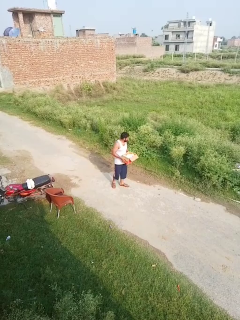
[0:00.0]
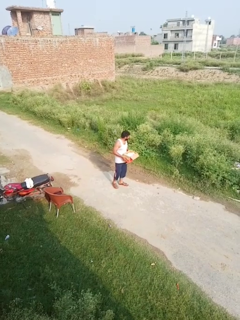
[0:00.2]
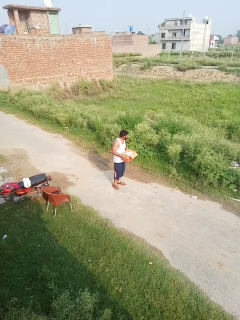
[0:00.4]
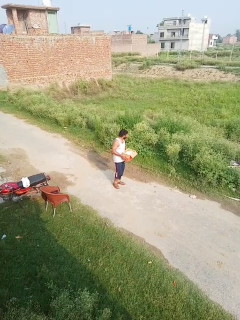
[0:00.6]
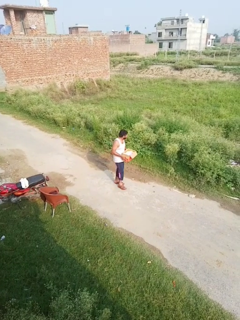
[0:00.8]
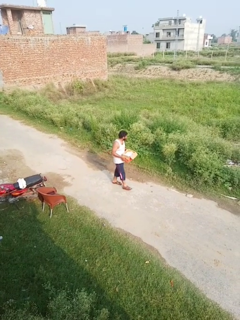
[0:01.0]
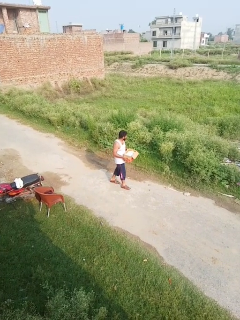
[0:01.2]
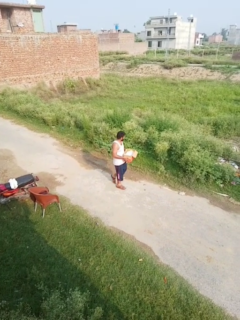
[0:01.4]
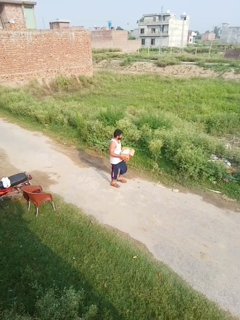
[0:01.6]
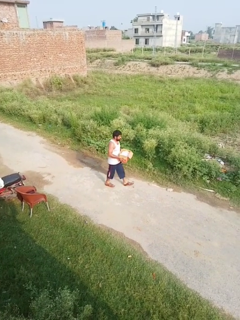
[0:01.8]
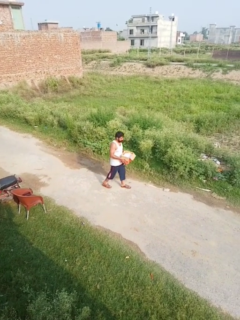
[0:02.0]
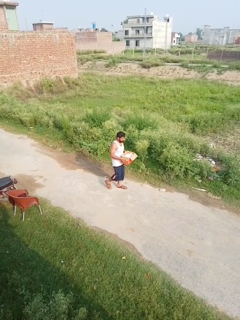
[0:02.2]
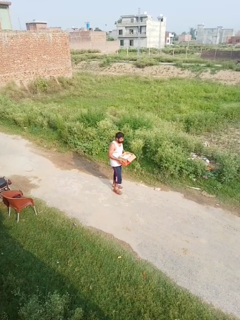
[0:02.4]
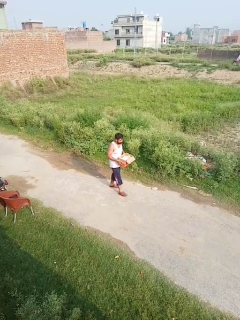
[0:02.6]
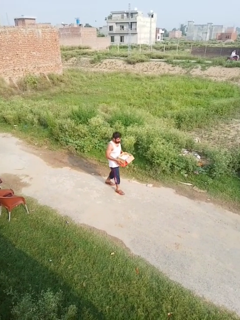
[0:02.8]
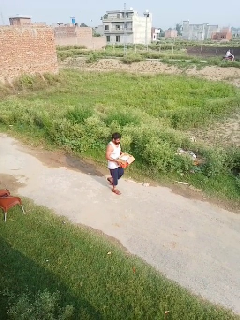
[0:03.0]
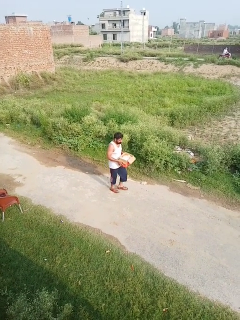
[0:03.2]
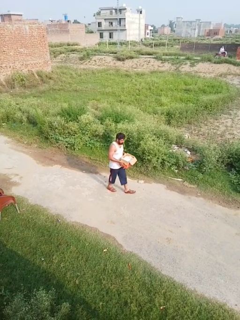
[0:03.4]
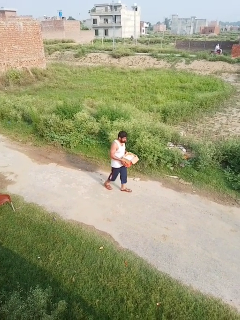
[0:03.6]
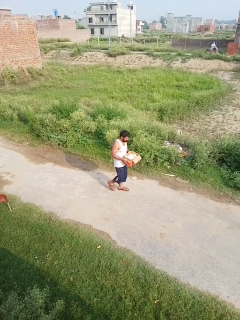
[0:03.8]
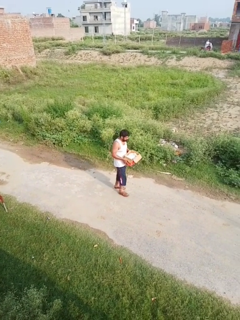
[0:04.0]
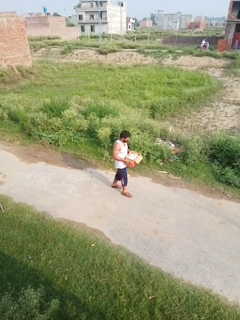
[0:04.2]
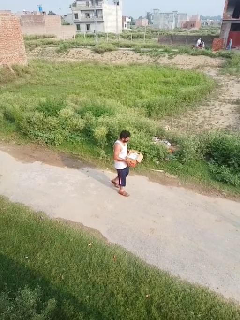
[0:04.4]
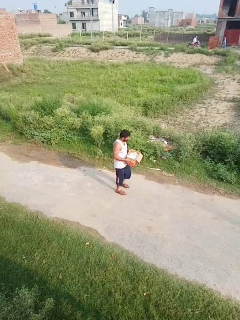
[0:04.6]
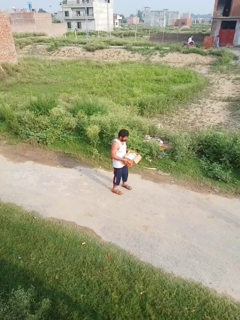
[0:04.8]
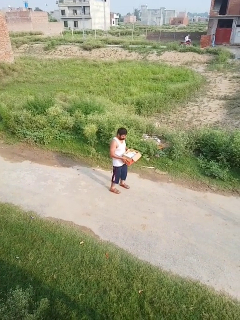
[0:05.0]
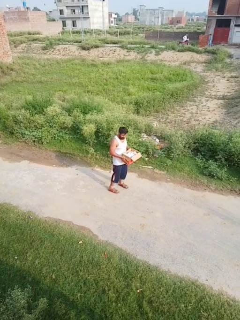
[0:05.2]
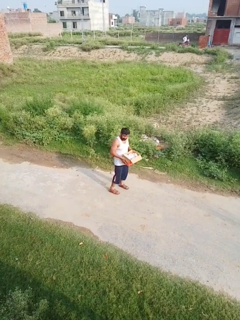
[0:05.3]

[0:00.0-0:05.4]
person carries laundry basket

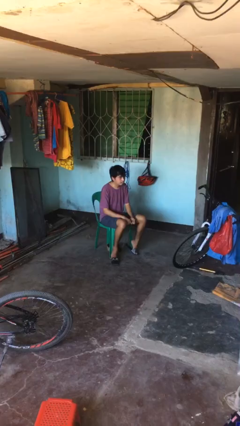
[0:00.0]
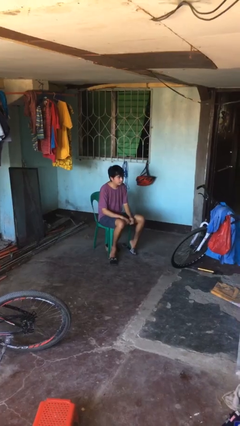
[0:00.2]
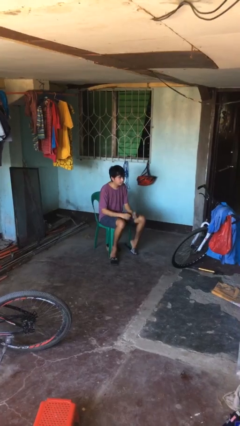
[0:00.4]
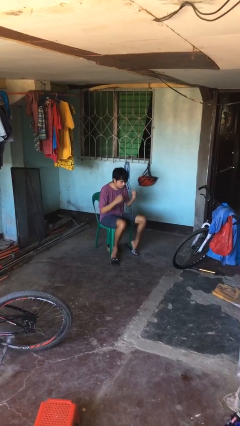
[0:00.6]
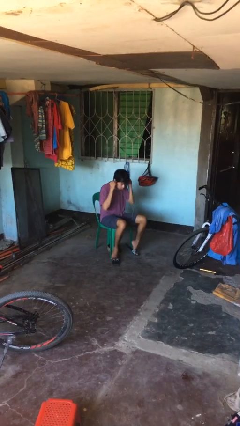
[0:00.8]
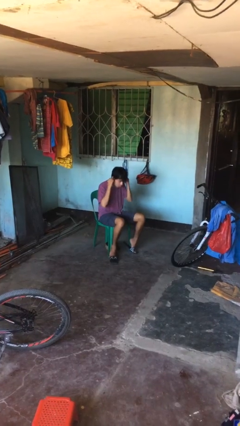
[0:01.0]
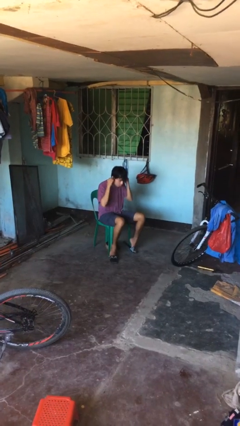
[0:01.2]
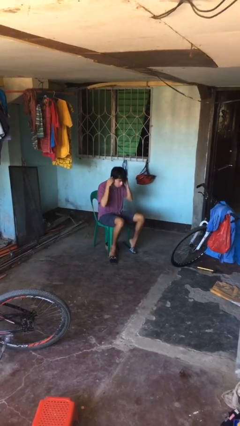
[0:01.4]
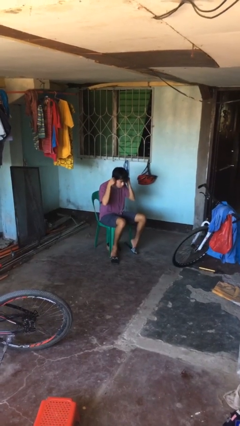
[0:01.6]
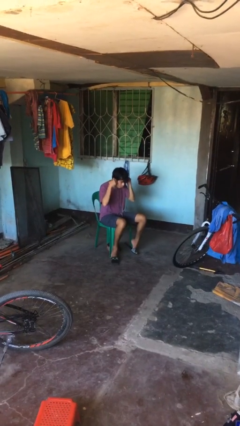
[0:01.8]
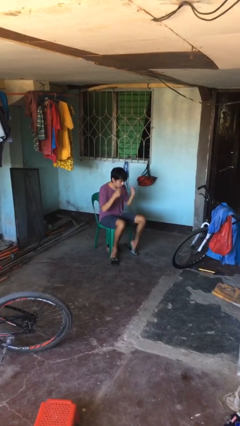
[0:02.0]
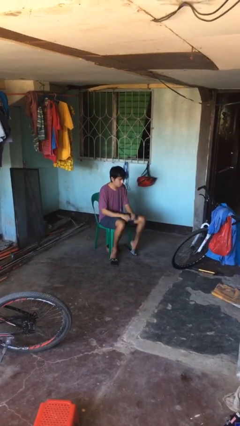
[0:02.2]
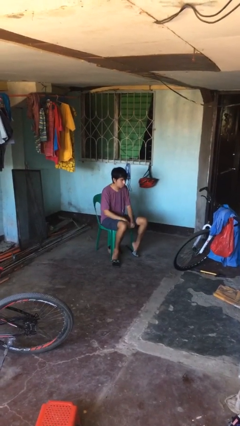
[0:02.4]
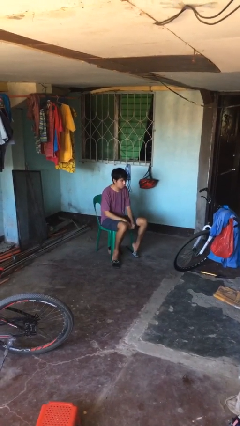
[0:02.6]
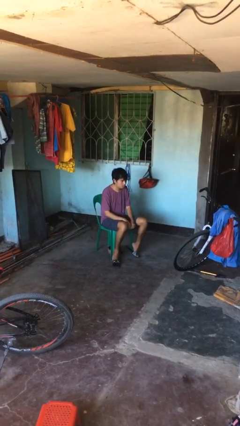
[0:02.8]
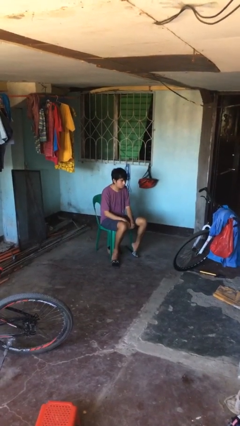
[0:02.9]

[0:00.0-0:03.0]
person puts on headphones

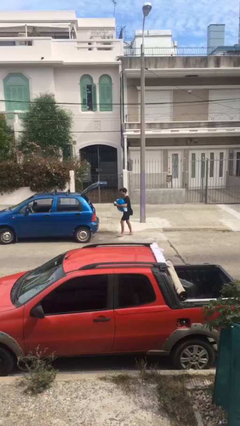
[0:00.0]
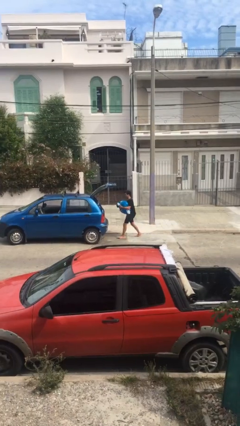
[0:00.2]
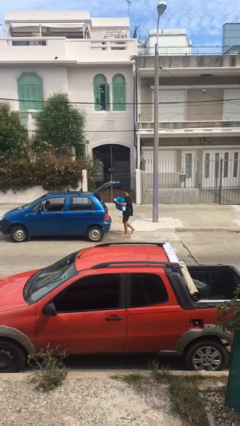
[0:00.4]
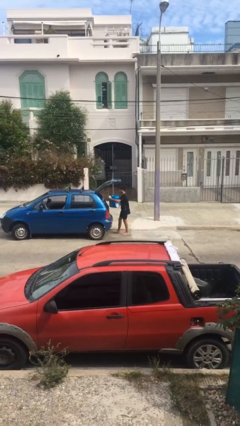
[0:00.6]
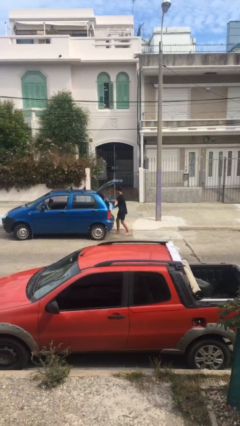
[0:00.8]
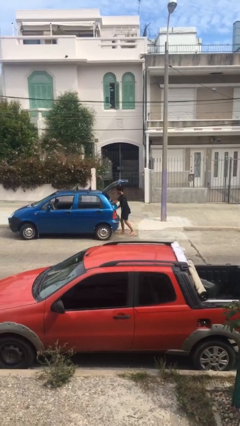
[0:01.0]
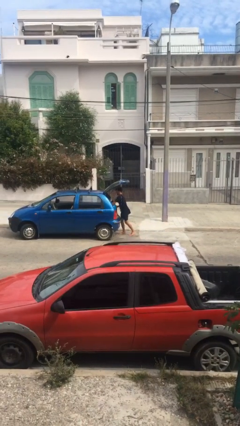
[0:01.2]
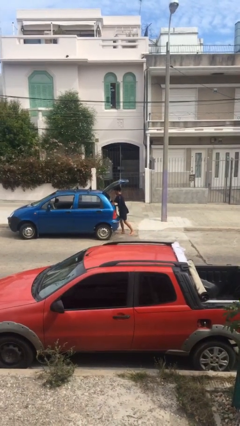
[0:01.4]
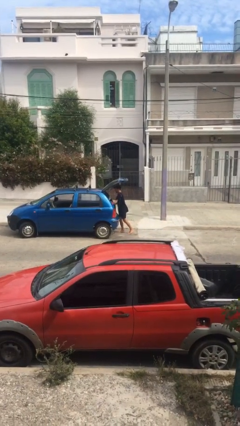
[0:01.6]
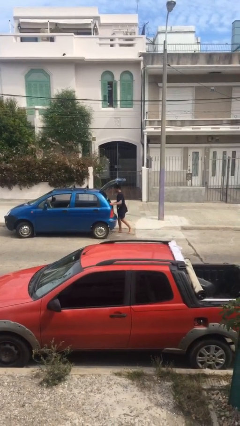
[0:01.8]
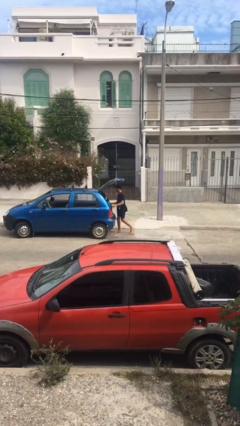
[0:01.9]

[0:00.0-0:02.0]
person loads car

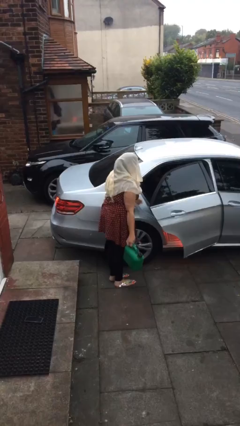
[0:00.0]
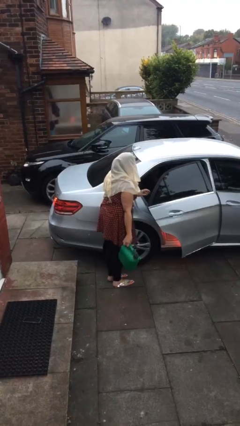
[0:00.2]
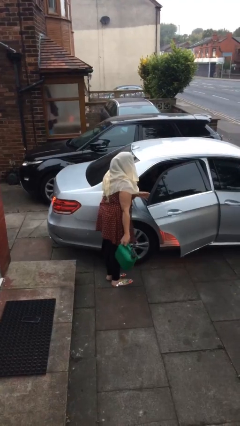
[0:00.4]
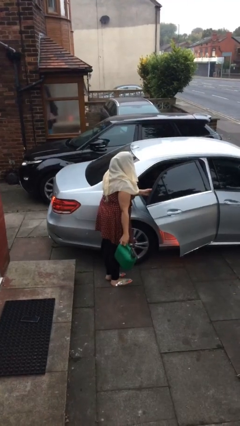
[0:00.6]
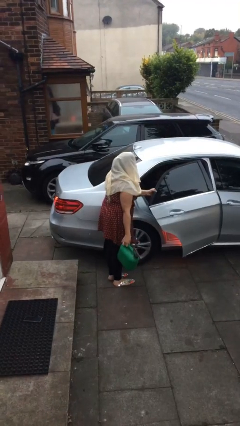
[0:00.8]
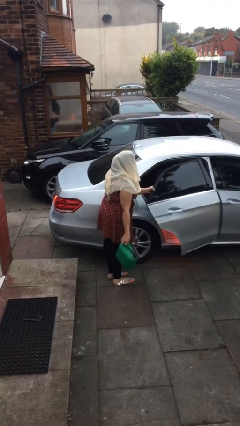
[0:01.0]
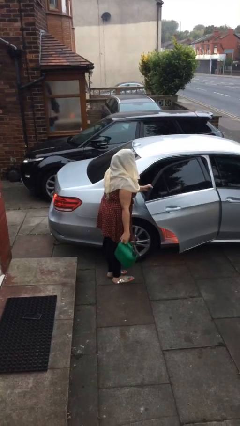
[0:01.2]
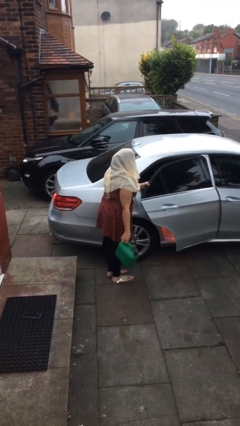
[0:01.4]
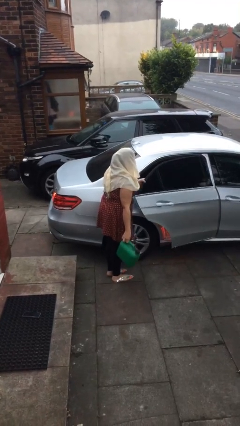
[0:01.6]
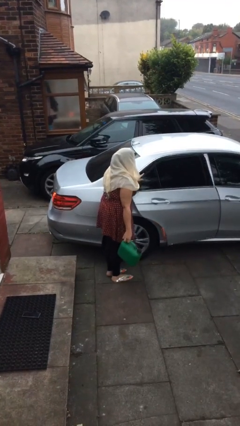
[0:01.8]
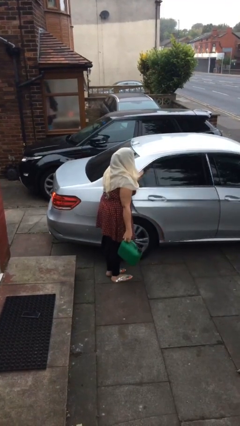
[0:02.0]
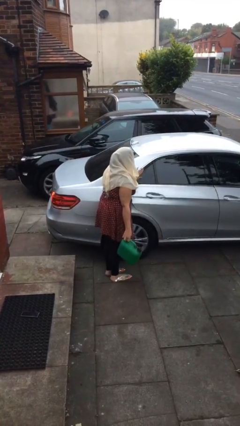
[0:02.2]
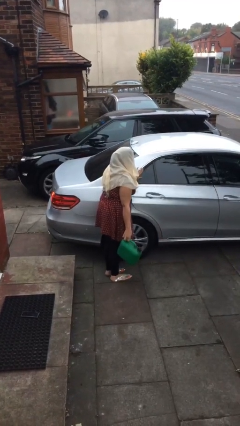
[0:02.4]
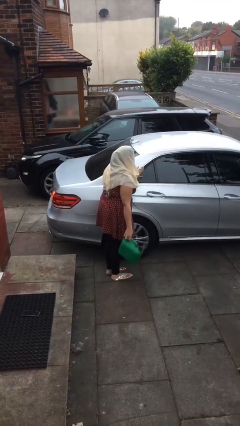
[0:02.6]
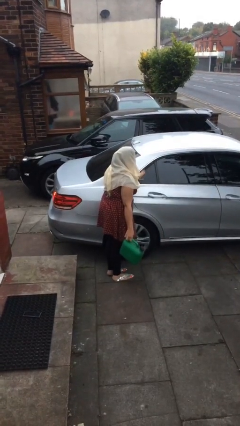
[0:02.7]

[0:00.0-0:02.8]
person closes car door

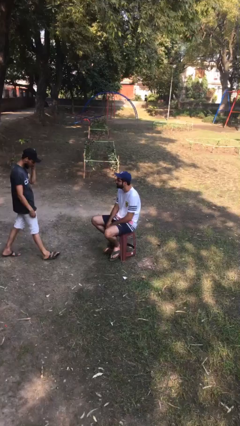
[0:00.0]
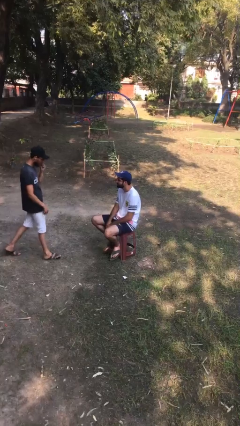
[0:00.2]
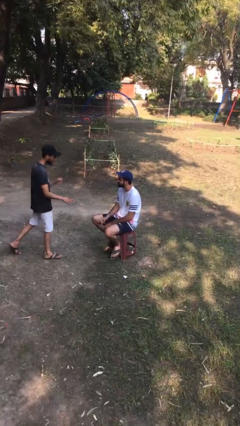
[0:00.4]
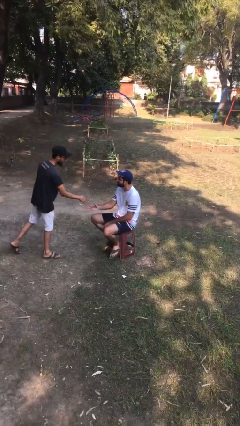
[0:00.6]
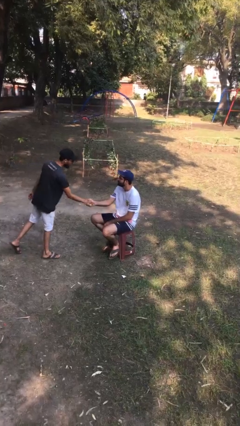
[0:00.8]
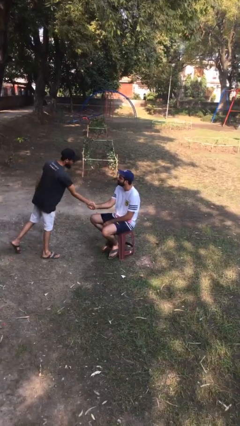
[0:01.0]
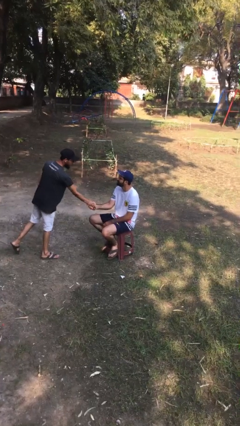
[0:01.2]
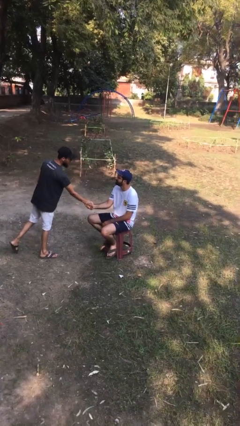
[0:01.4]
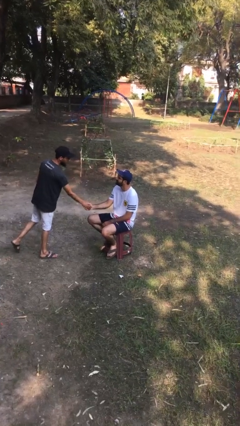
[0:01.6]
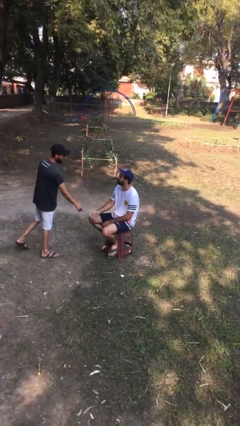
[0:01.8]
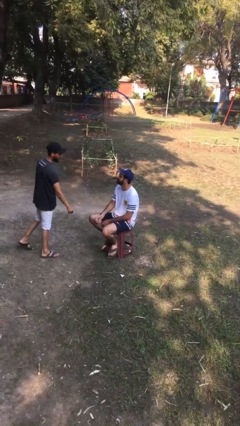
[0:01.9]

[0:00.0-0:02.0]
person shakes hand

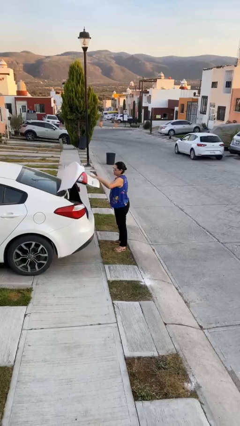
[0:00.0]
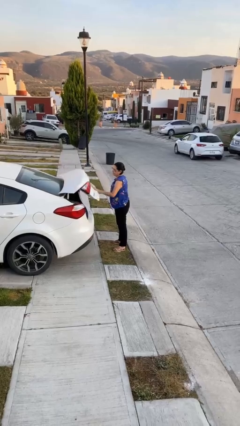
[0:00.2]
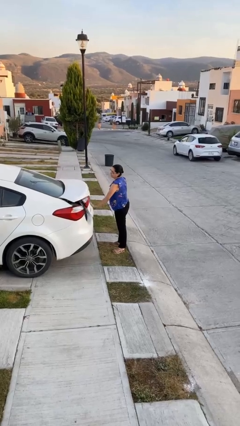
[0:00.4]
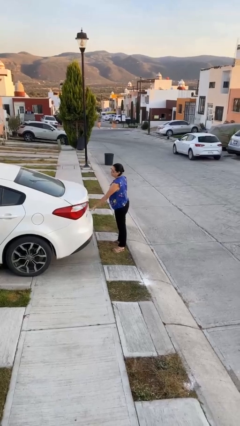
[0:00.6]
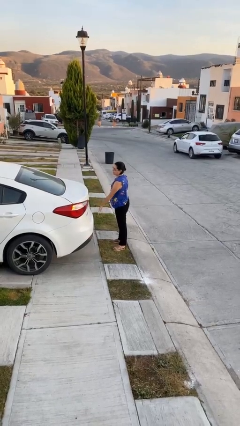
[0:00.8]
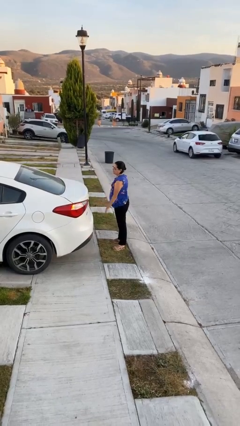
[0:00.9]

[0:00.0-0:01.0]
person closes car trunk

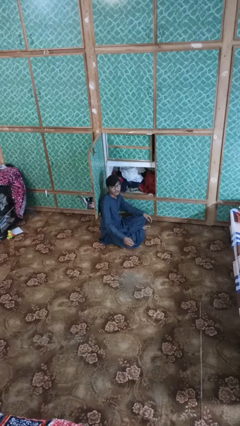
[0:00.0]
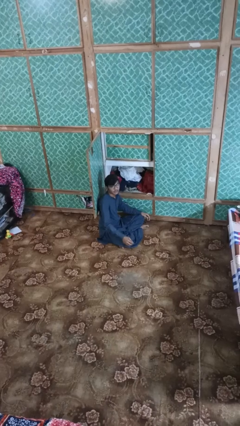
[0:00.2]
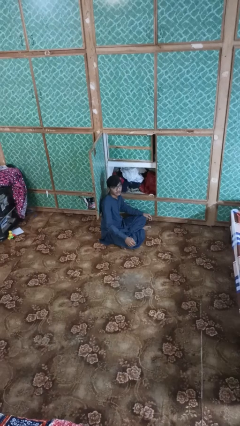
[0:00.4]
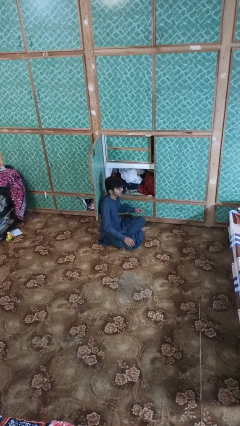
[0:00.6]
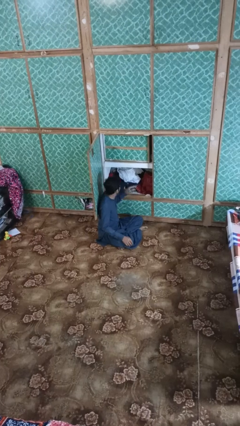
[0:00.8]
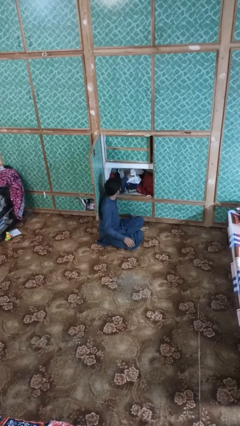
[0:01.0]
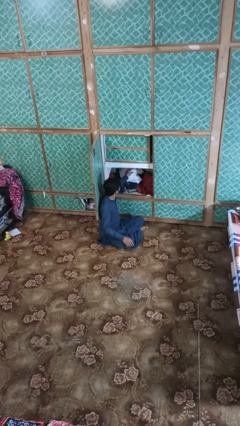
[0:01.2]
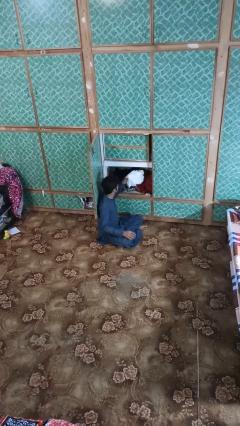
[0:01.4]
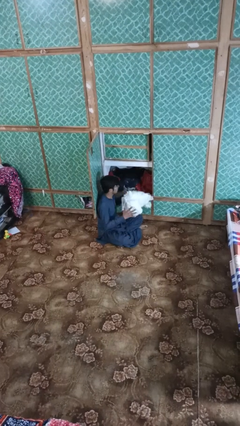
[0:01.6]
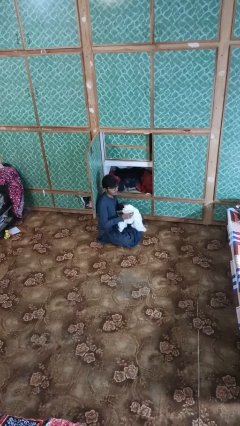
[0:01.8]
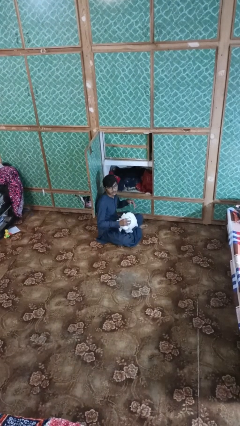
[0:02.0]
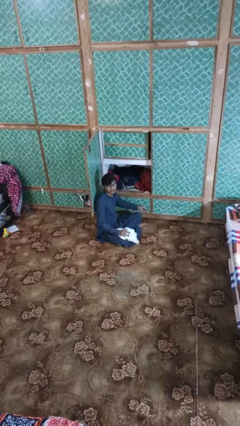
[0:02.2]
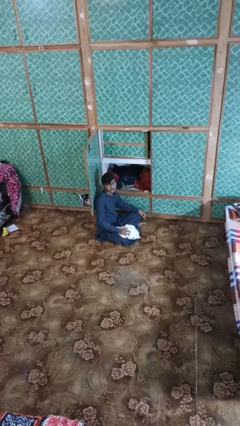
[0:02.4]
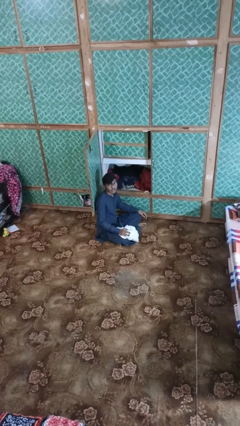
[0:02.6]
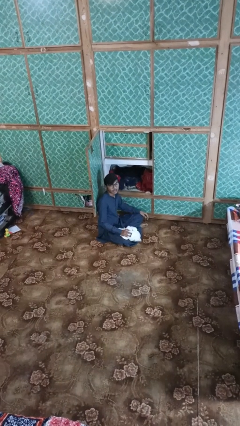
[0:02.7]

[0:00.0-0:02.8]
person takes clothes from dresser
